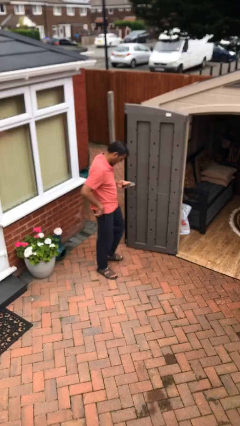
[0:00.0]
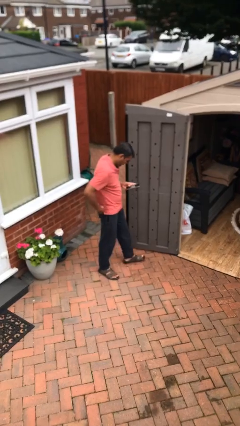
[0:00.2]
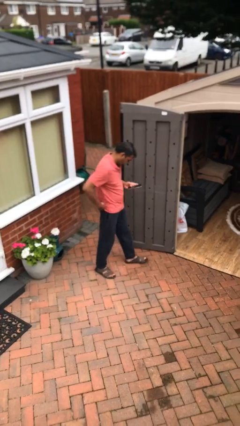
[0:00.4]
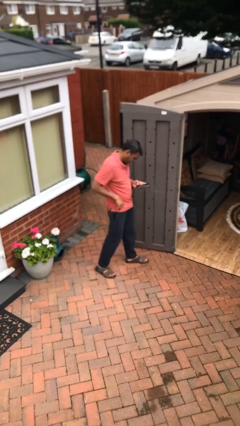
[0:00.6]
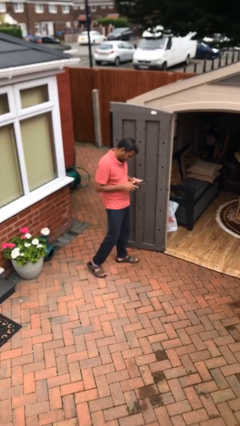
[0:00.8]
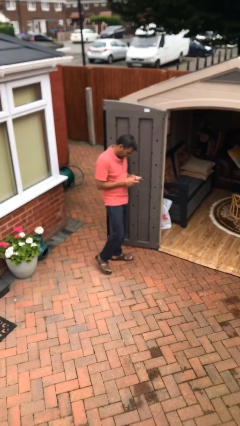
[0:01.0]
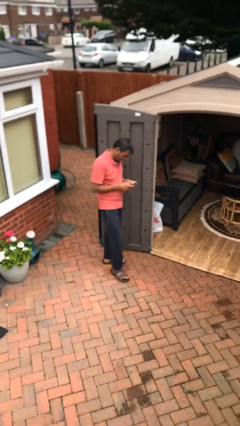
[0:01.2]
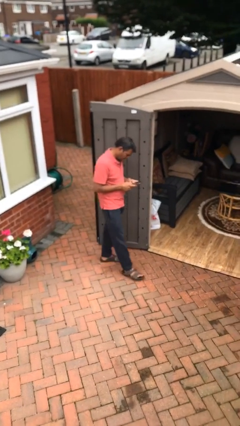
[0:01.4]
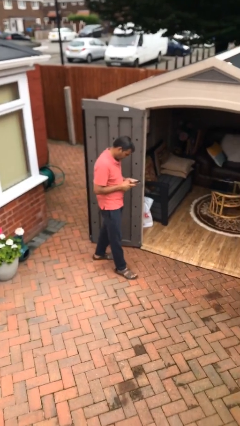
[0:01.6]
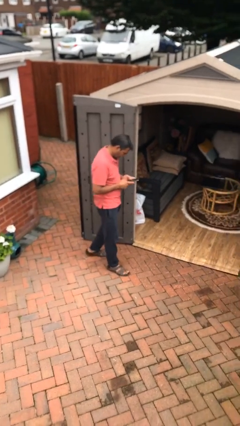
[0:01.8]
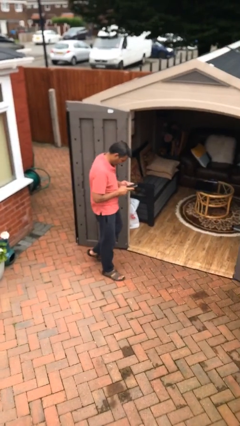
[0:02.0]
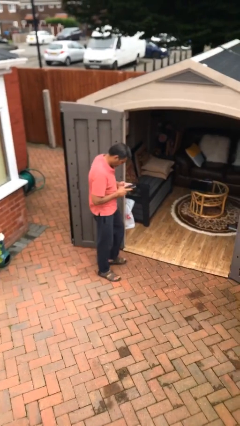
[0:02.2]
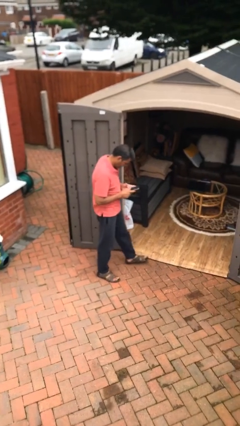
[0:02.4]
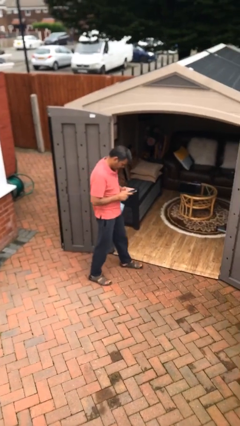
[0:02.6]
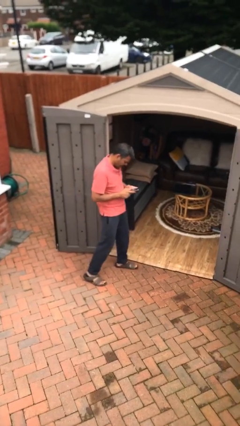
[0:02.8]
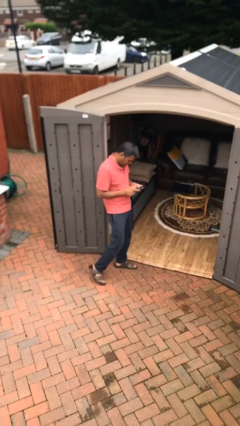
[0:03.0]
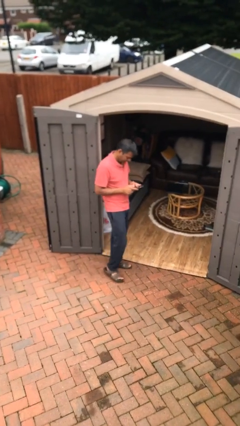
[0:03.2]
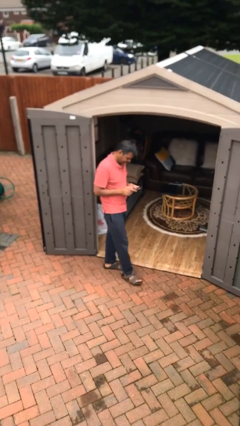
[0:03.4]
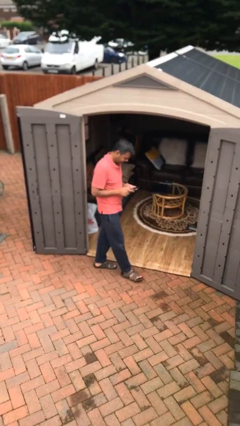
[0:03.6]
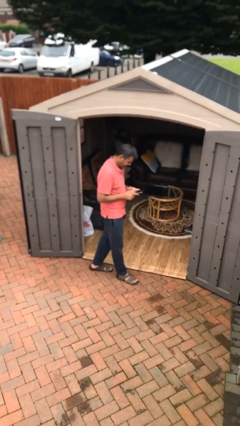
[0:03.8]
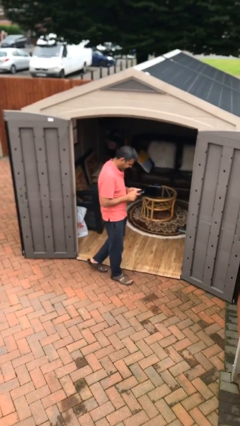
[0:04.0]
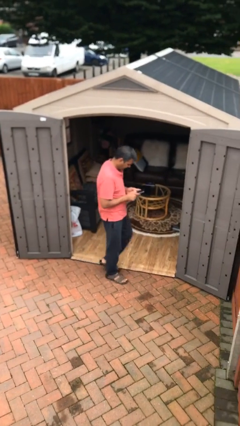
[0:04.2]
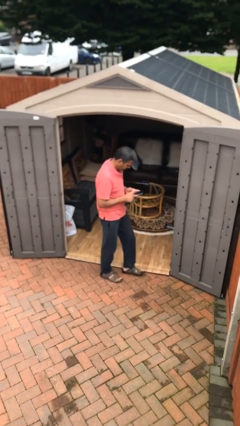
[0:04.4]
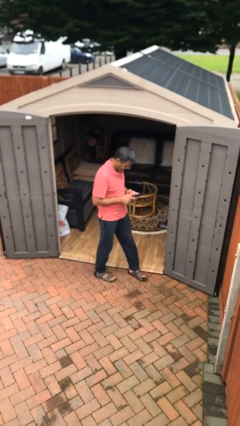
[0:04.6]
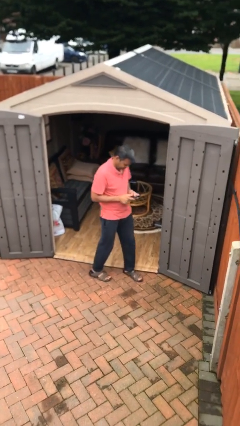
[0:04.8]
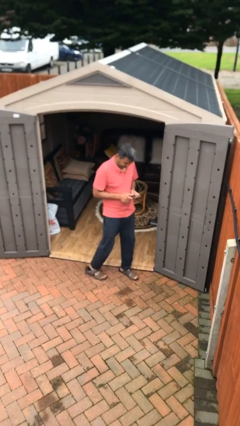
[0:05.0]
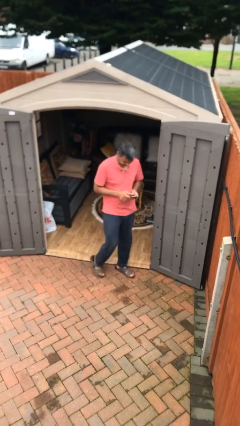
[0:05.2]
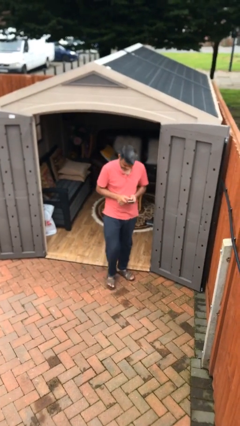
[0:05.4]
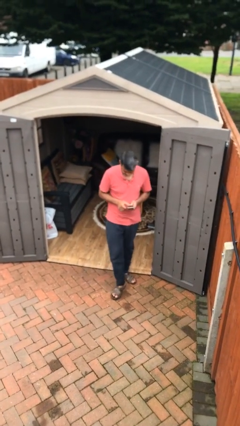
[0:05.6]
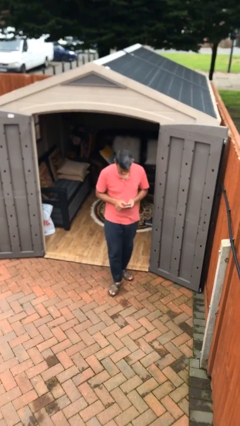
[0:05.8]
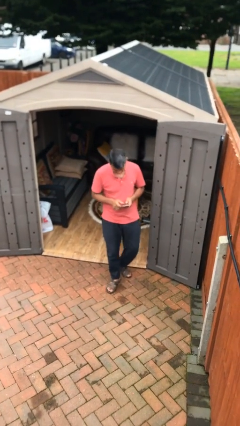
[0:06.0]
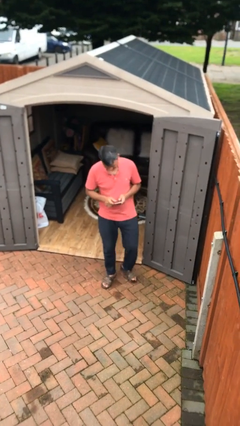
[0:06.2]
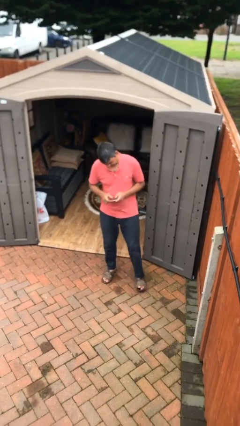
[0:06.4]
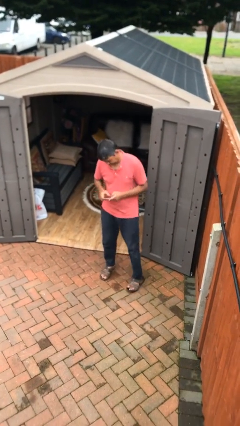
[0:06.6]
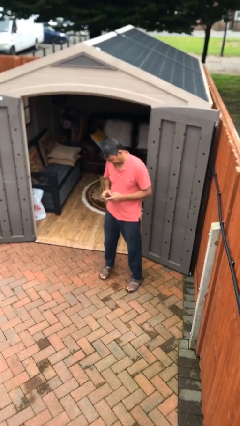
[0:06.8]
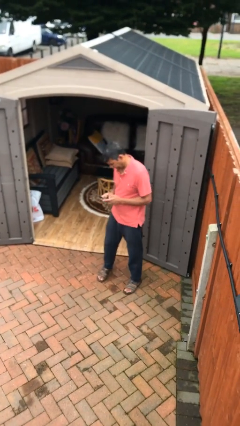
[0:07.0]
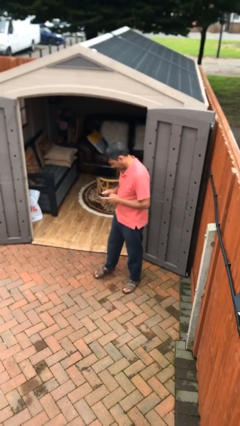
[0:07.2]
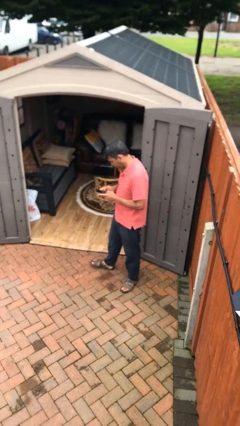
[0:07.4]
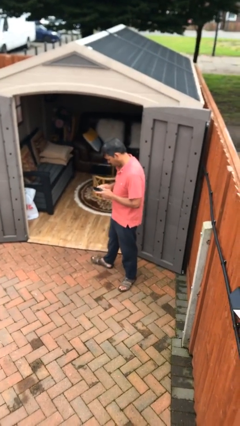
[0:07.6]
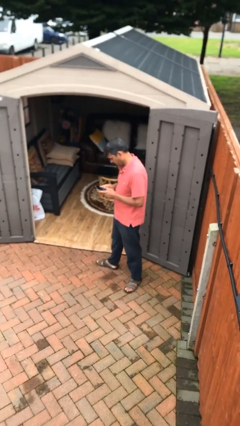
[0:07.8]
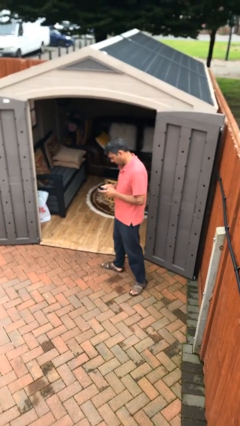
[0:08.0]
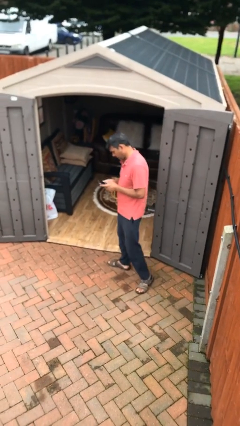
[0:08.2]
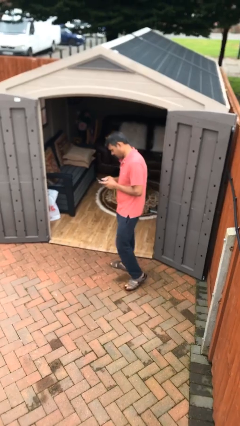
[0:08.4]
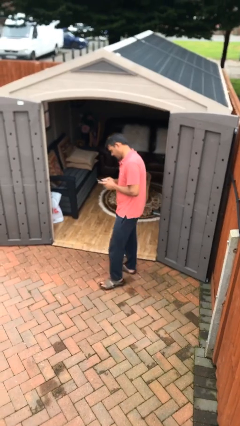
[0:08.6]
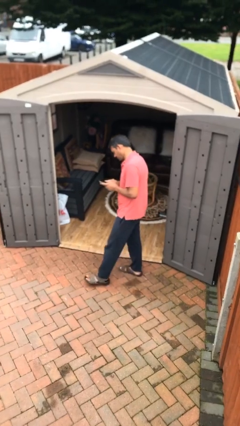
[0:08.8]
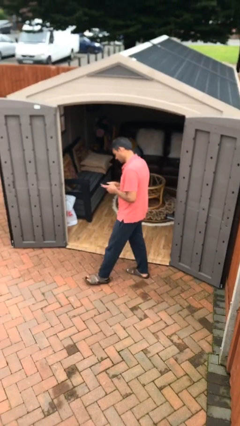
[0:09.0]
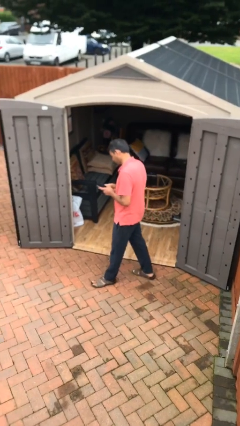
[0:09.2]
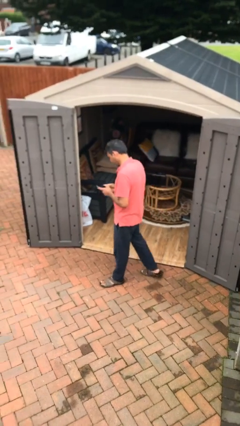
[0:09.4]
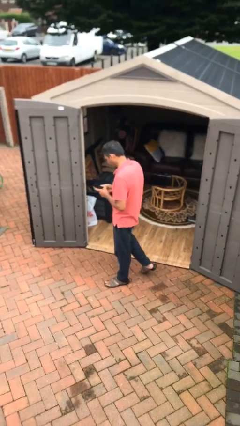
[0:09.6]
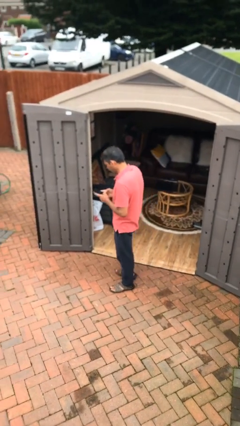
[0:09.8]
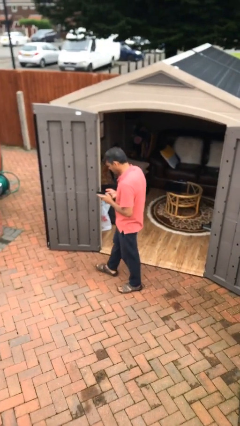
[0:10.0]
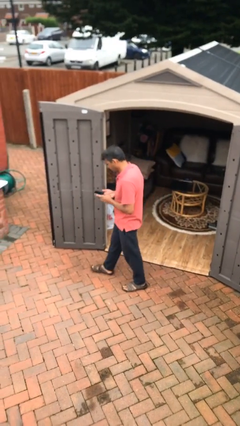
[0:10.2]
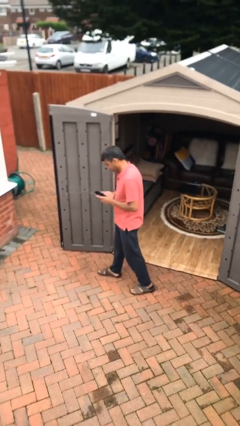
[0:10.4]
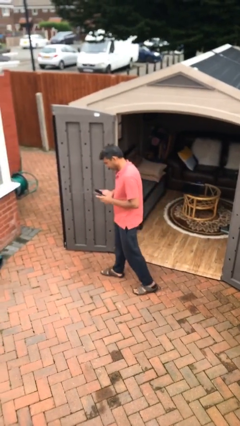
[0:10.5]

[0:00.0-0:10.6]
person texts on phone

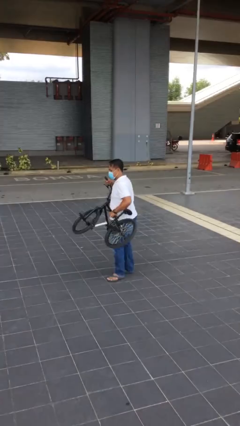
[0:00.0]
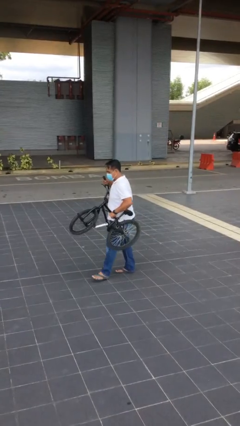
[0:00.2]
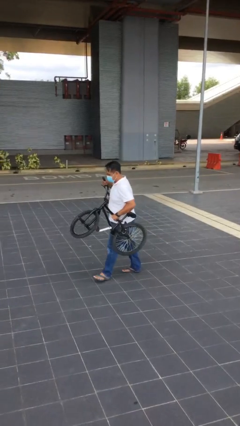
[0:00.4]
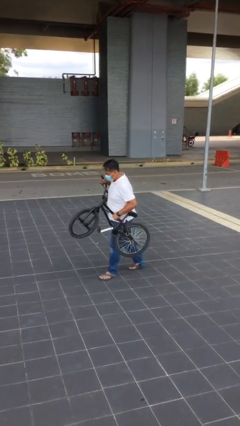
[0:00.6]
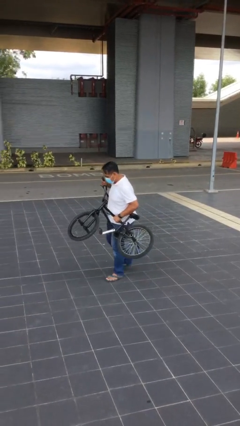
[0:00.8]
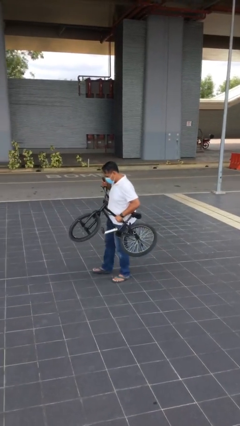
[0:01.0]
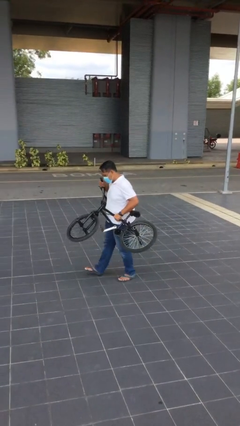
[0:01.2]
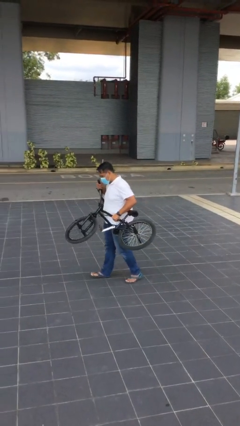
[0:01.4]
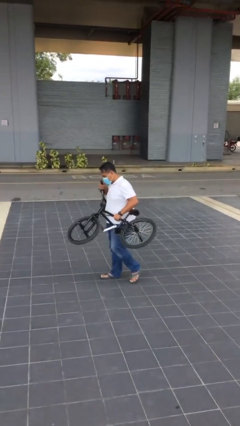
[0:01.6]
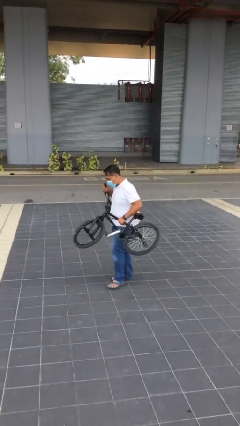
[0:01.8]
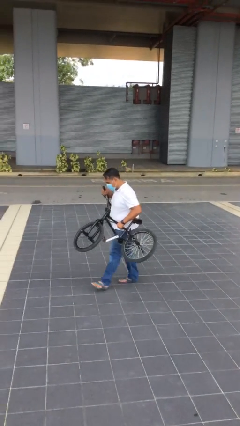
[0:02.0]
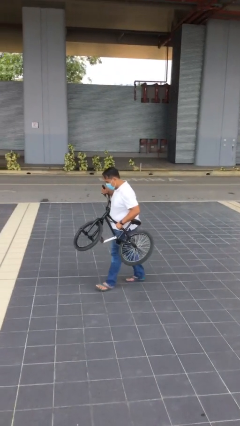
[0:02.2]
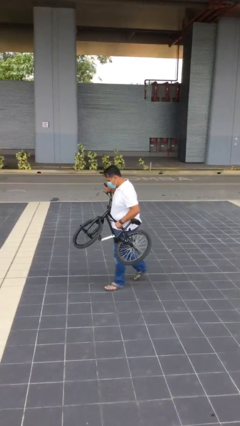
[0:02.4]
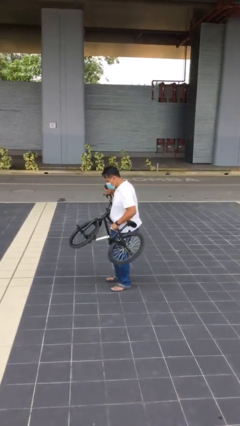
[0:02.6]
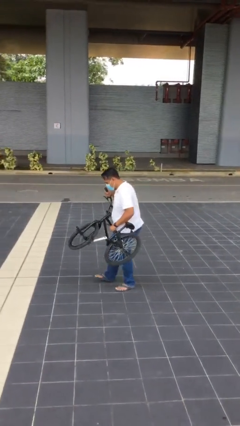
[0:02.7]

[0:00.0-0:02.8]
person carries heavy object

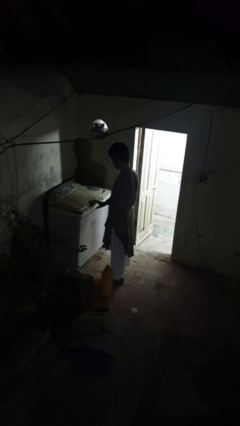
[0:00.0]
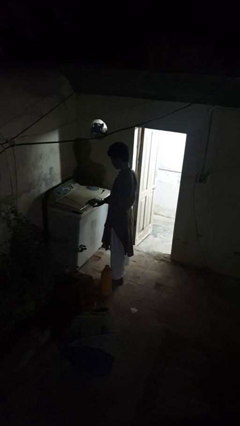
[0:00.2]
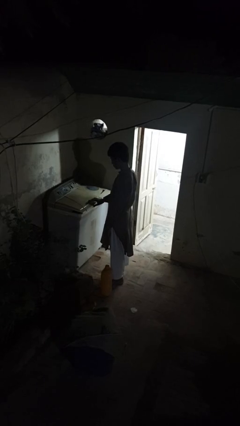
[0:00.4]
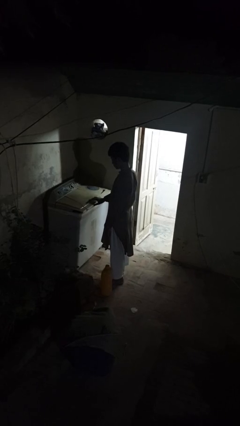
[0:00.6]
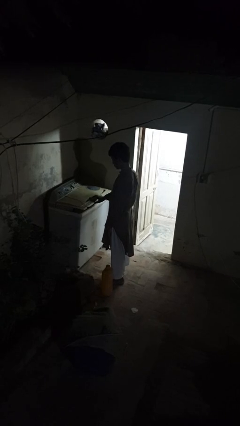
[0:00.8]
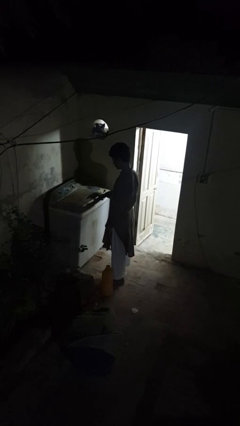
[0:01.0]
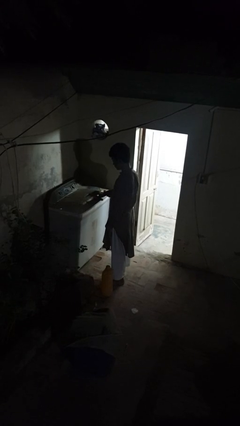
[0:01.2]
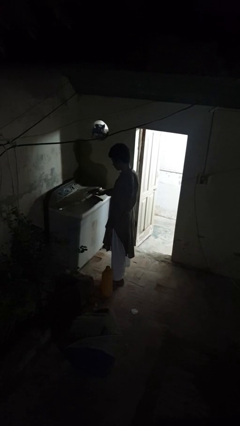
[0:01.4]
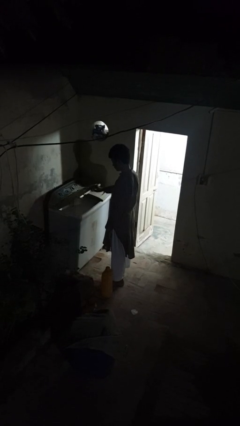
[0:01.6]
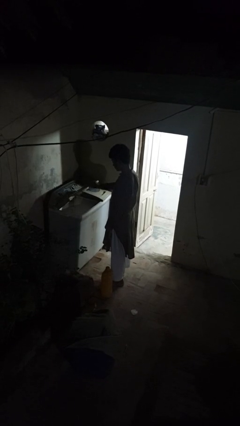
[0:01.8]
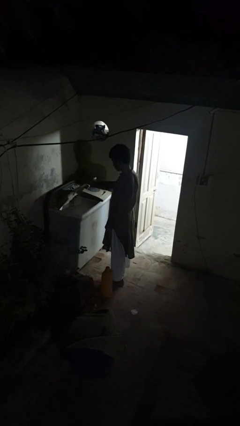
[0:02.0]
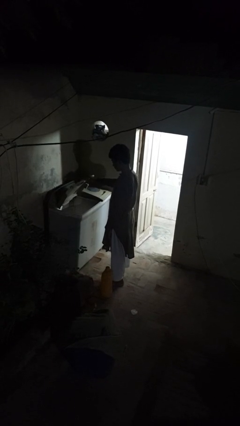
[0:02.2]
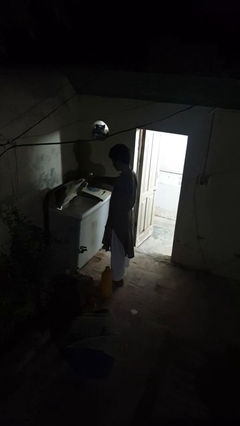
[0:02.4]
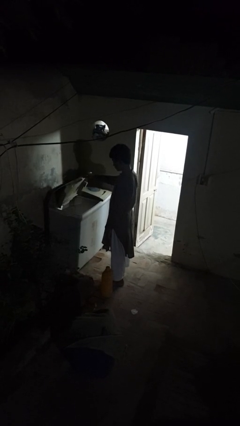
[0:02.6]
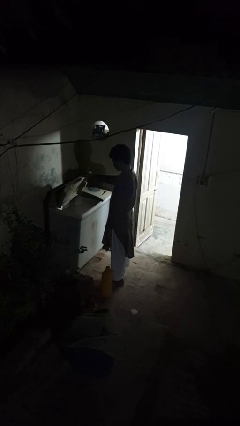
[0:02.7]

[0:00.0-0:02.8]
person opens clothes washer

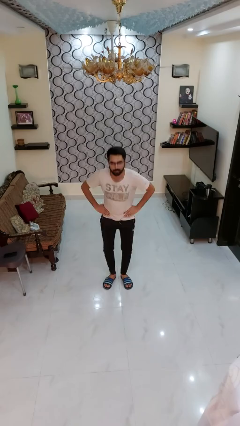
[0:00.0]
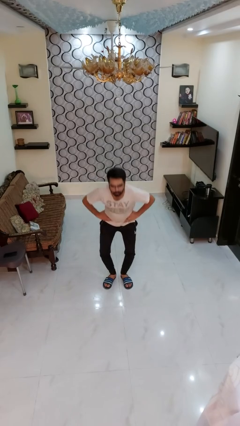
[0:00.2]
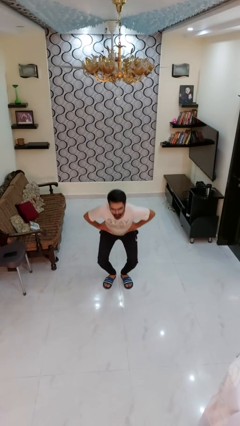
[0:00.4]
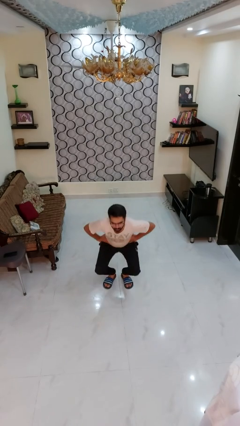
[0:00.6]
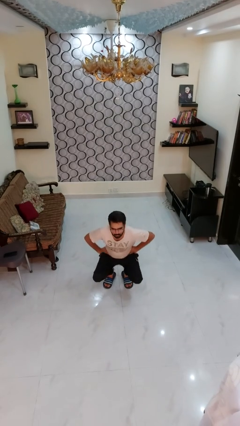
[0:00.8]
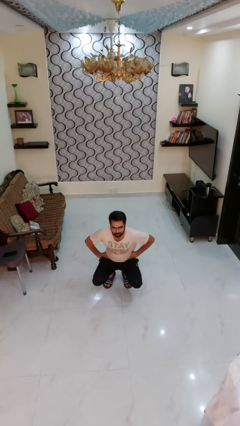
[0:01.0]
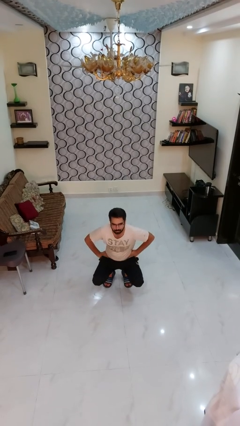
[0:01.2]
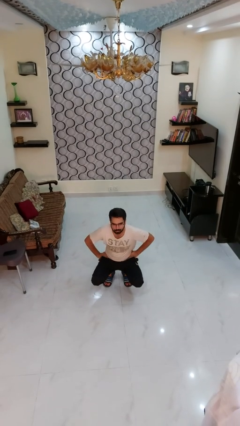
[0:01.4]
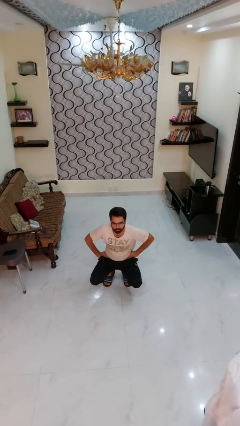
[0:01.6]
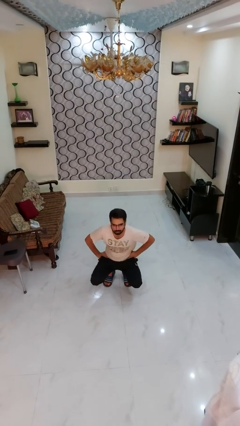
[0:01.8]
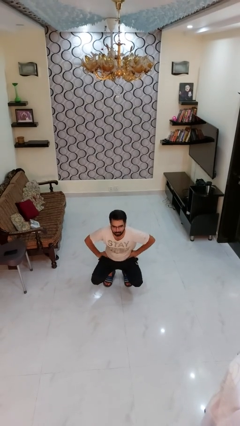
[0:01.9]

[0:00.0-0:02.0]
person squats
